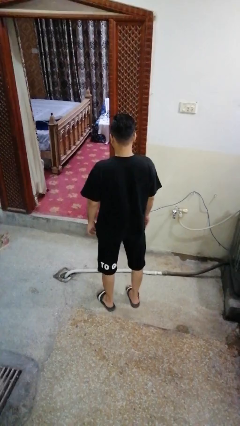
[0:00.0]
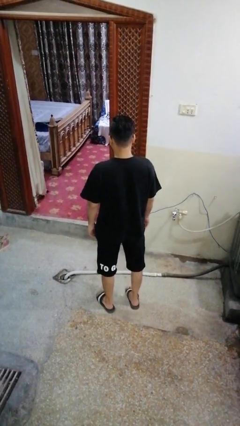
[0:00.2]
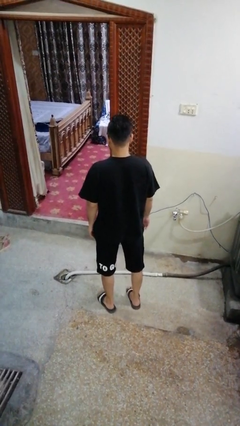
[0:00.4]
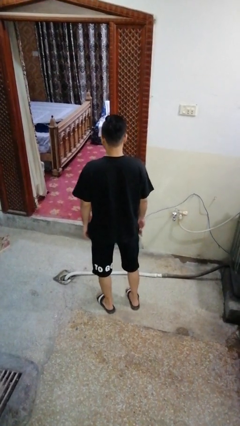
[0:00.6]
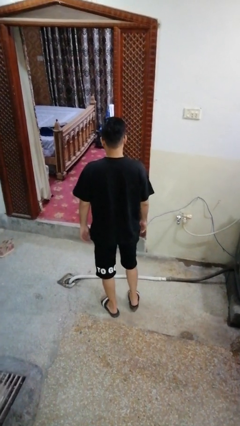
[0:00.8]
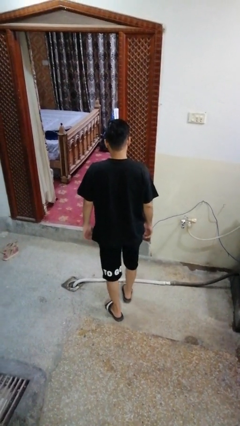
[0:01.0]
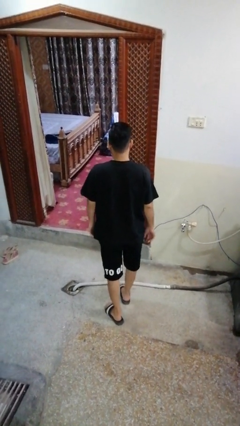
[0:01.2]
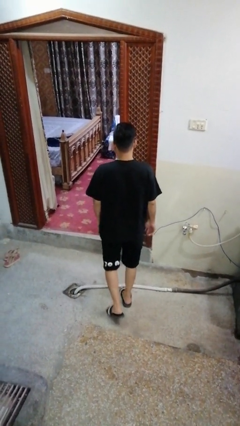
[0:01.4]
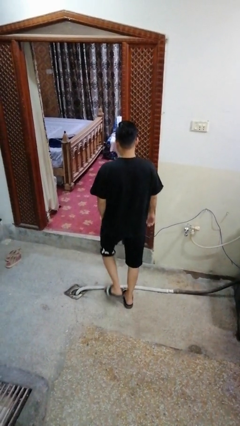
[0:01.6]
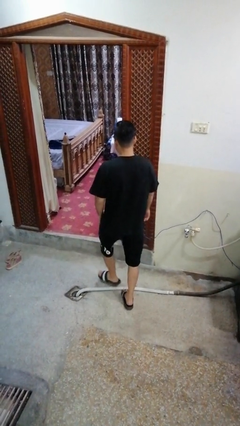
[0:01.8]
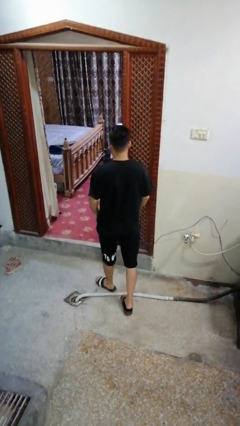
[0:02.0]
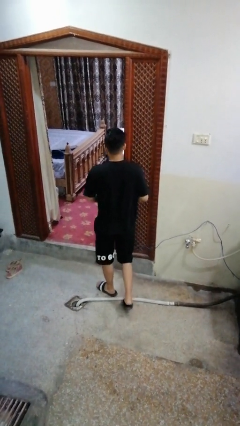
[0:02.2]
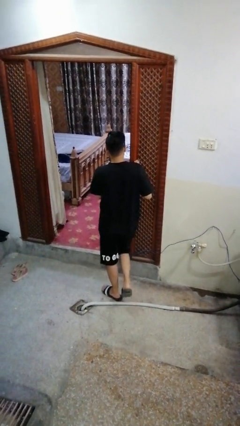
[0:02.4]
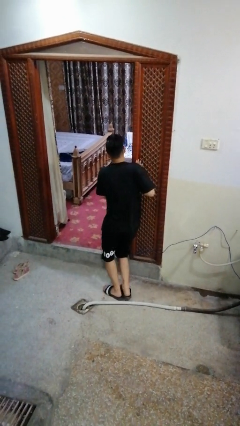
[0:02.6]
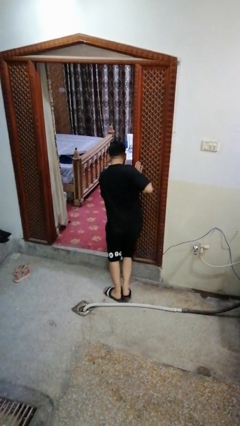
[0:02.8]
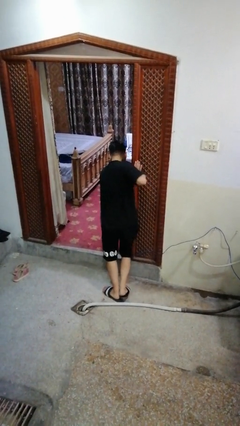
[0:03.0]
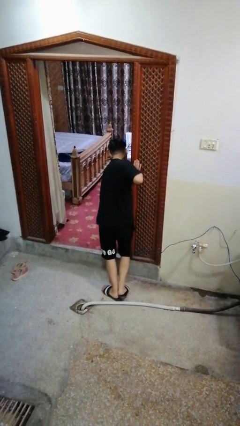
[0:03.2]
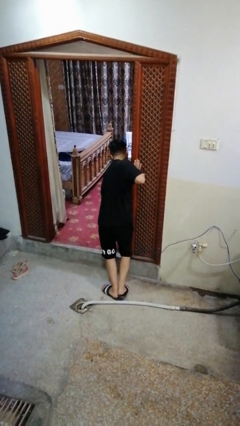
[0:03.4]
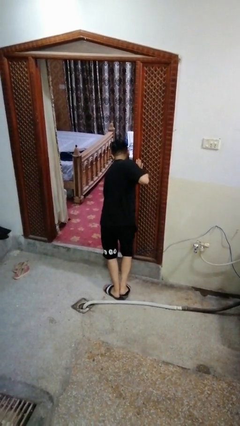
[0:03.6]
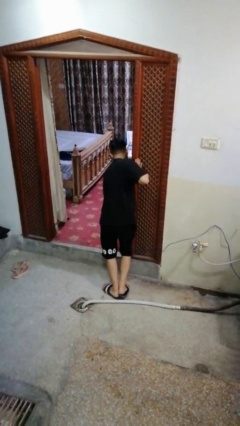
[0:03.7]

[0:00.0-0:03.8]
person bumps into wall

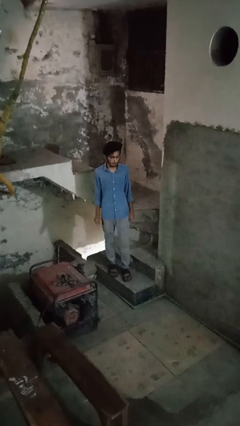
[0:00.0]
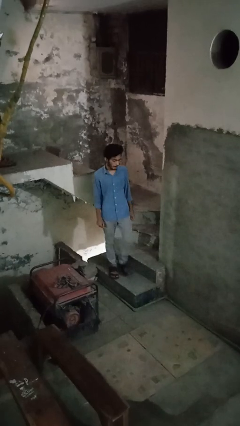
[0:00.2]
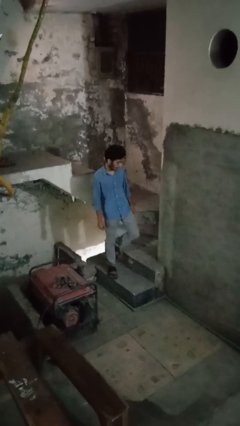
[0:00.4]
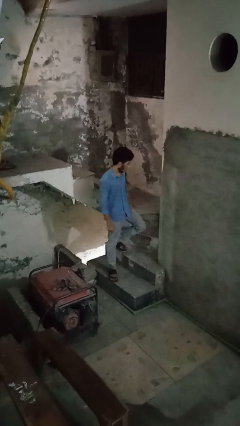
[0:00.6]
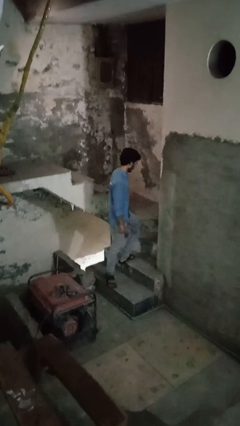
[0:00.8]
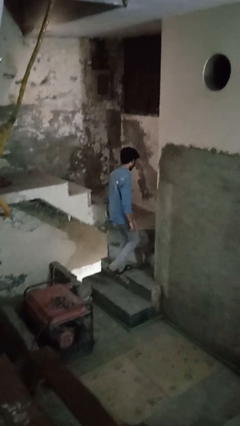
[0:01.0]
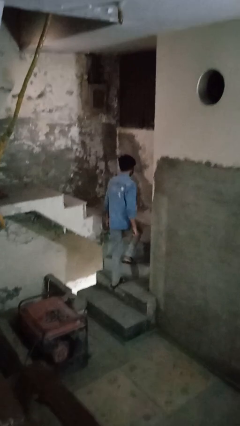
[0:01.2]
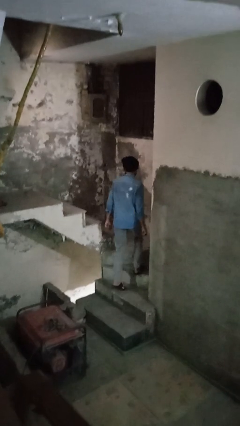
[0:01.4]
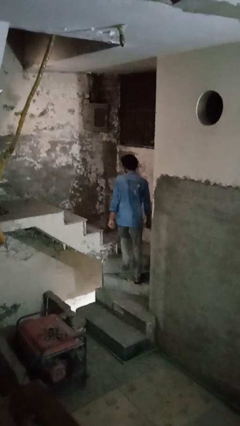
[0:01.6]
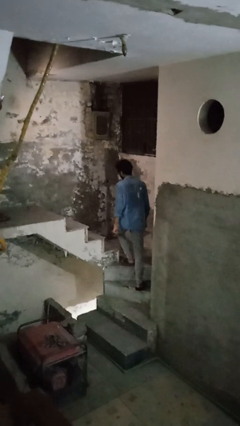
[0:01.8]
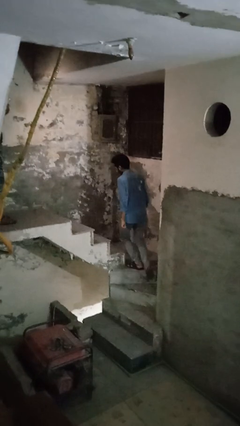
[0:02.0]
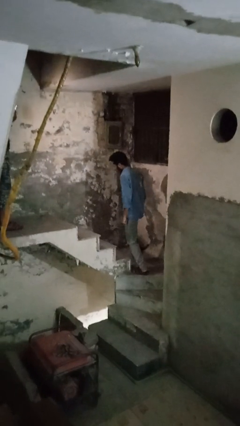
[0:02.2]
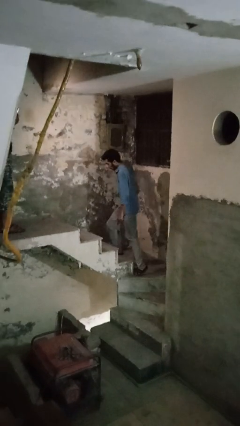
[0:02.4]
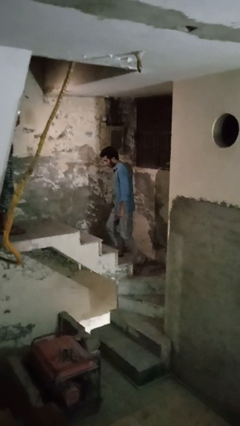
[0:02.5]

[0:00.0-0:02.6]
person climbs up stairs

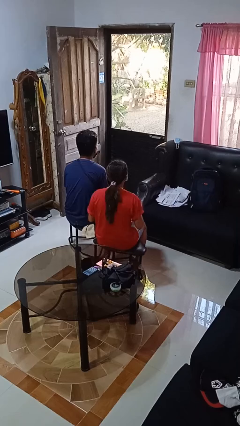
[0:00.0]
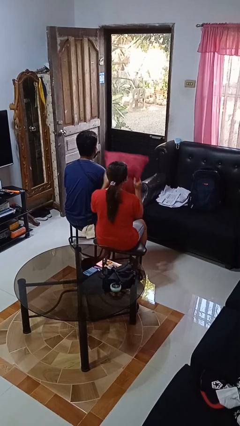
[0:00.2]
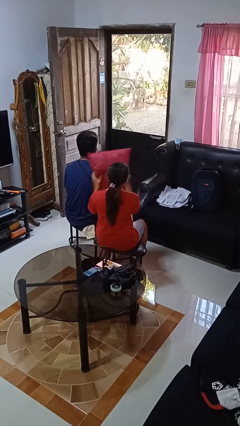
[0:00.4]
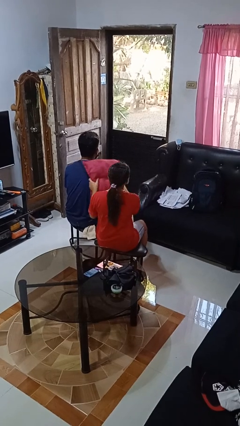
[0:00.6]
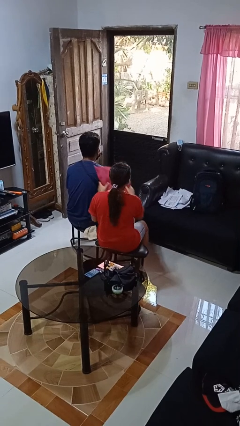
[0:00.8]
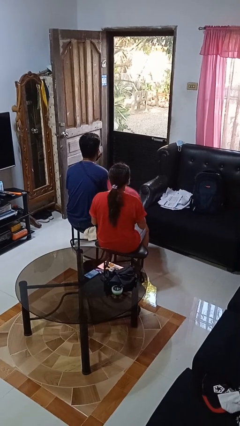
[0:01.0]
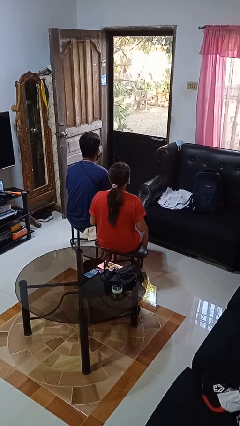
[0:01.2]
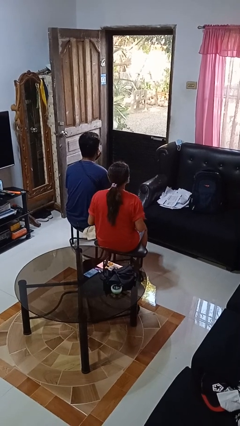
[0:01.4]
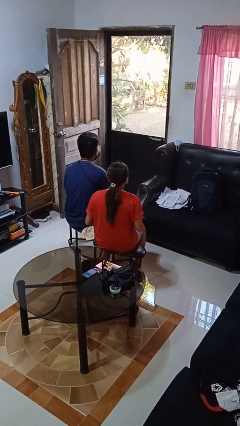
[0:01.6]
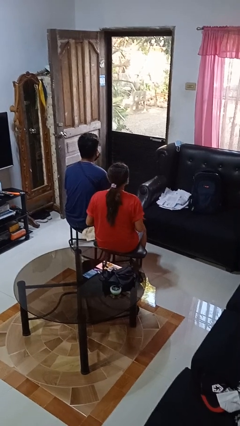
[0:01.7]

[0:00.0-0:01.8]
person hits person with pillow

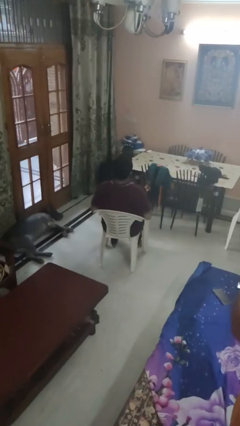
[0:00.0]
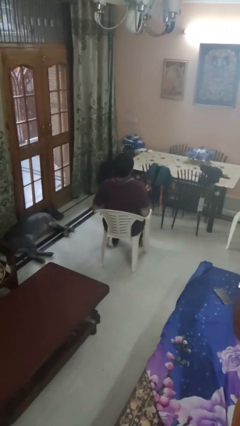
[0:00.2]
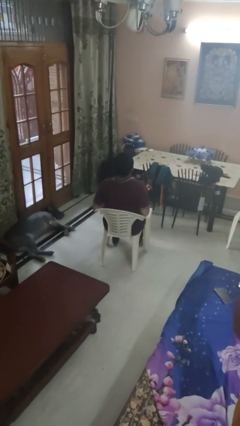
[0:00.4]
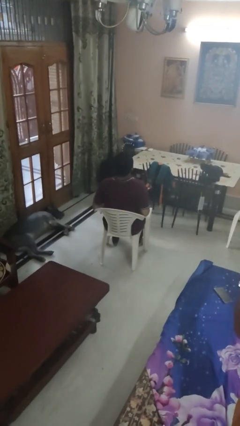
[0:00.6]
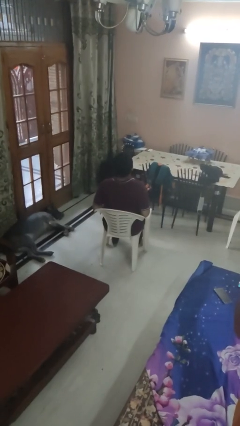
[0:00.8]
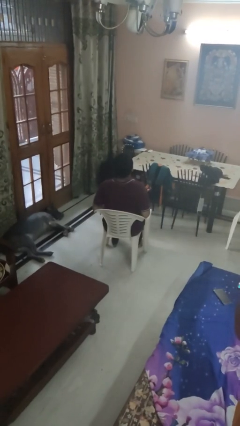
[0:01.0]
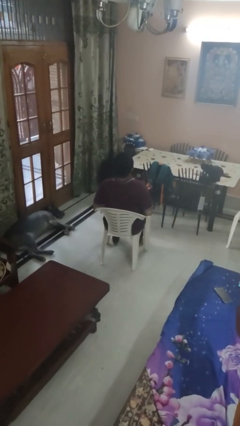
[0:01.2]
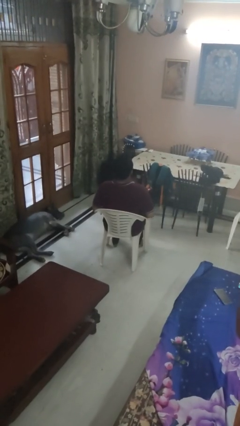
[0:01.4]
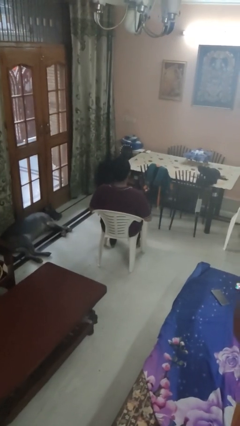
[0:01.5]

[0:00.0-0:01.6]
person shrugs

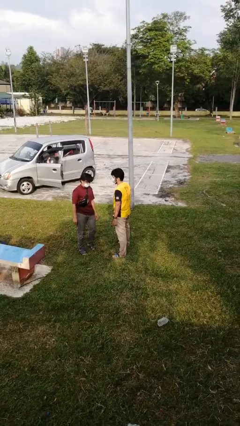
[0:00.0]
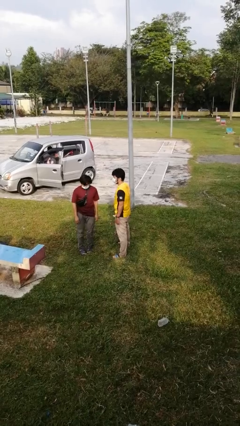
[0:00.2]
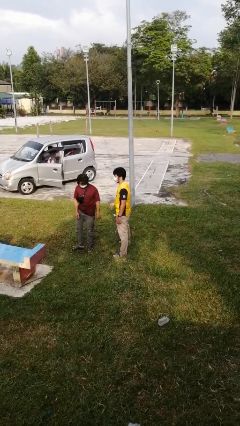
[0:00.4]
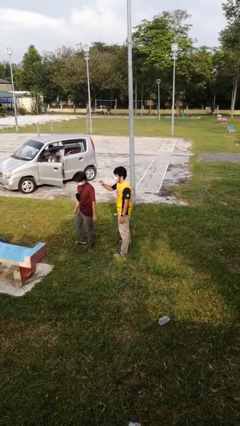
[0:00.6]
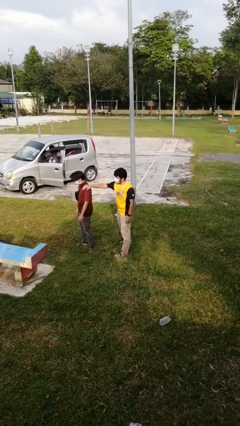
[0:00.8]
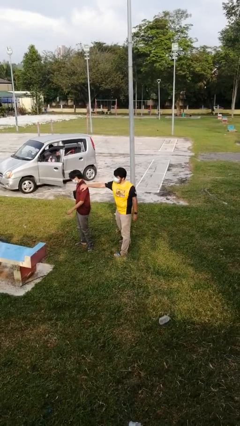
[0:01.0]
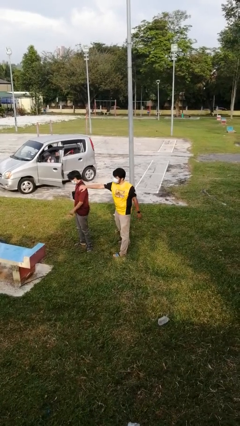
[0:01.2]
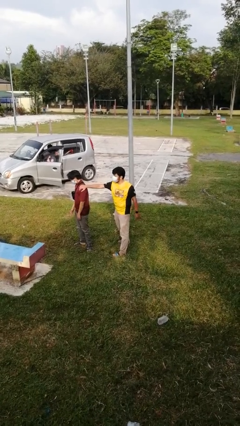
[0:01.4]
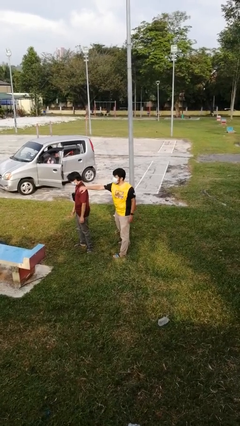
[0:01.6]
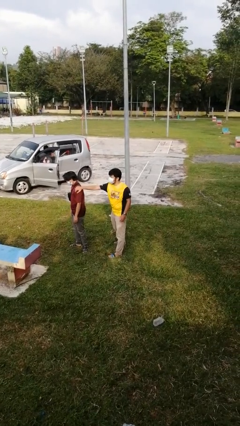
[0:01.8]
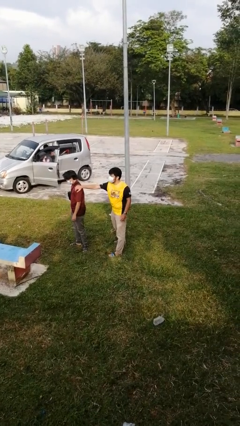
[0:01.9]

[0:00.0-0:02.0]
person grabs person by shoulder

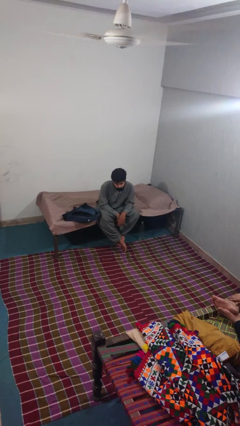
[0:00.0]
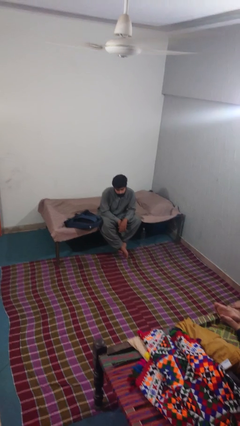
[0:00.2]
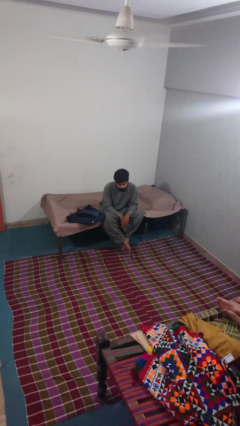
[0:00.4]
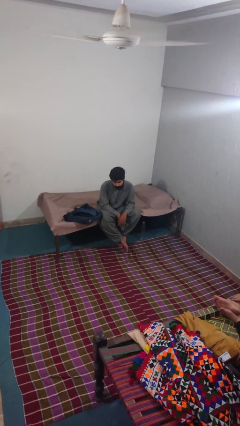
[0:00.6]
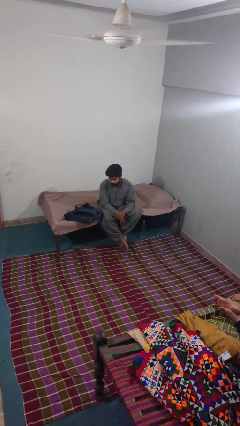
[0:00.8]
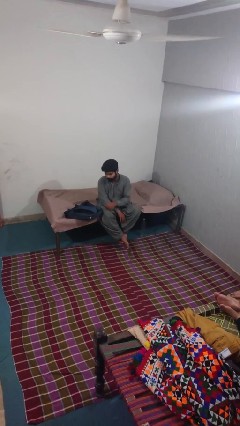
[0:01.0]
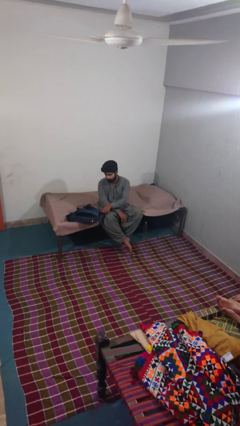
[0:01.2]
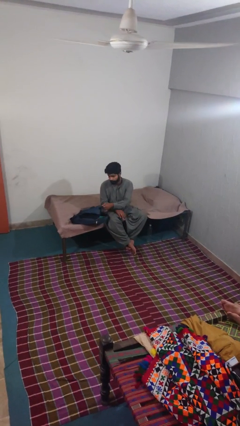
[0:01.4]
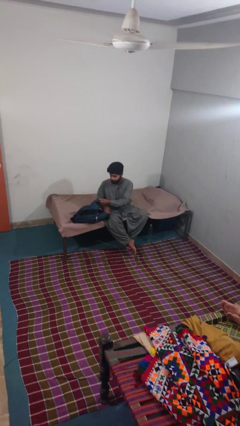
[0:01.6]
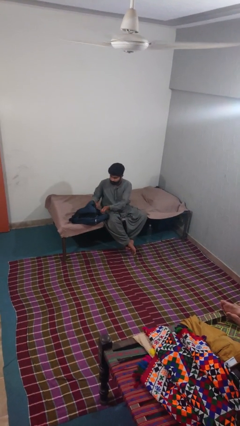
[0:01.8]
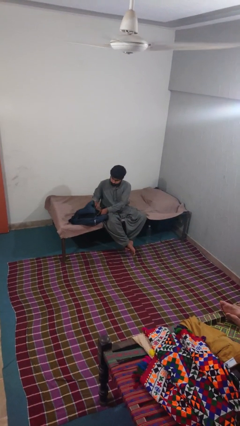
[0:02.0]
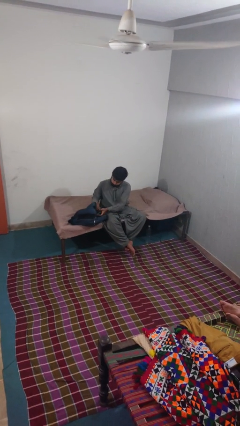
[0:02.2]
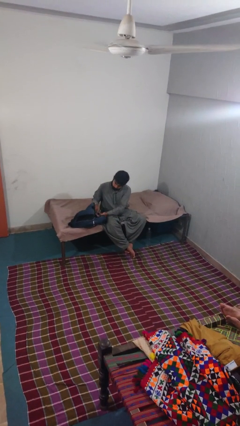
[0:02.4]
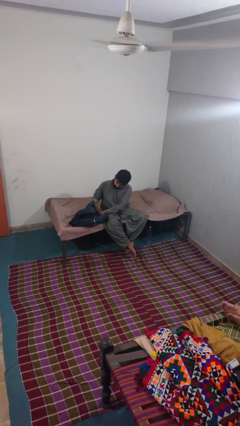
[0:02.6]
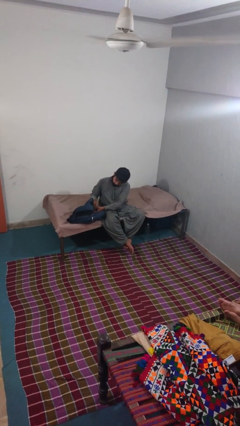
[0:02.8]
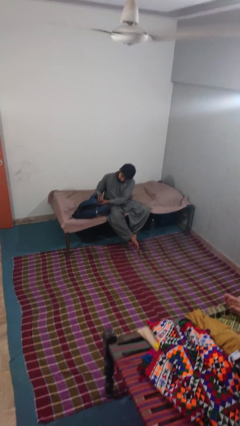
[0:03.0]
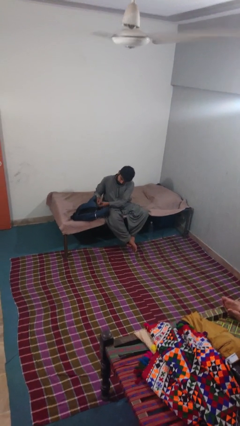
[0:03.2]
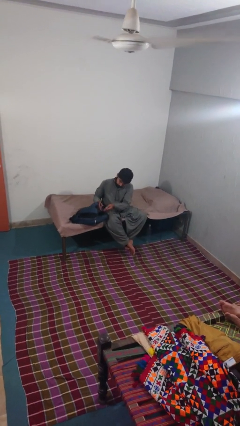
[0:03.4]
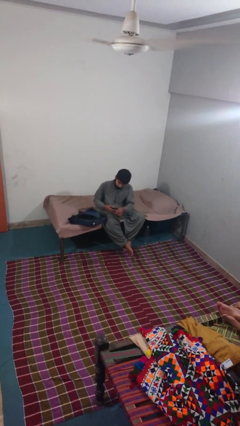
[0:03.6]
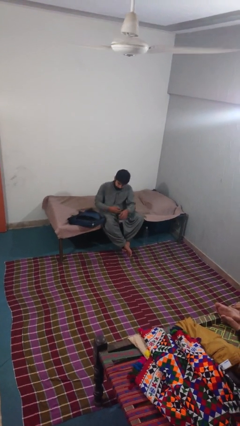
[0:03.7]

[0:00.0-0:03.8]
person searches in bag

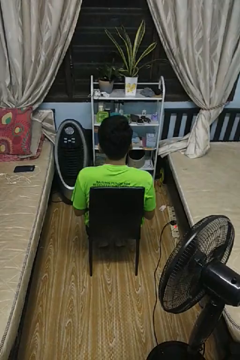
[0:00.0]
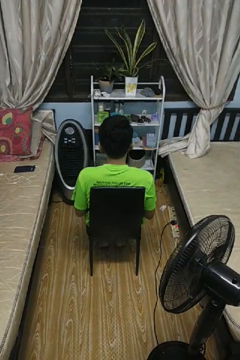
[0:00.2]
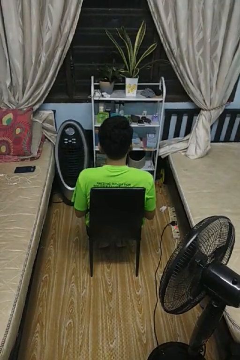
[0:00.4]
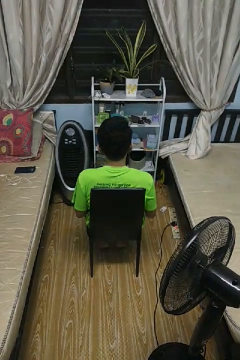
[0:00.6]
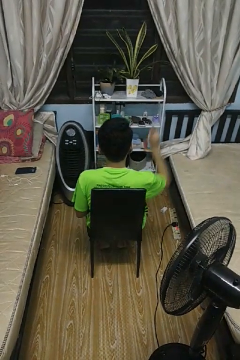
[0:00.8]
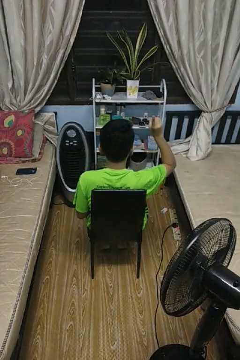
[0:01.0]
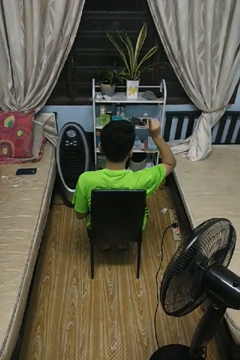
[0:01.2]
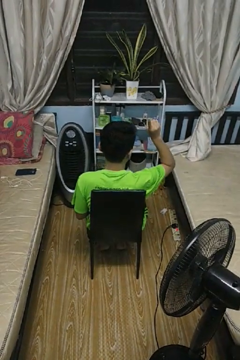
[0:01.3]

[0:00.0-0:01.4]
person gestures number one

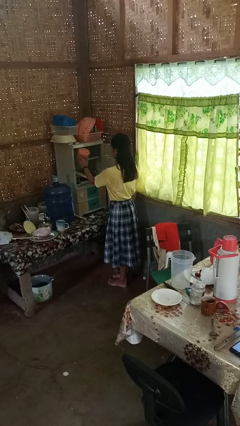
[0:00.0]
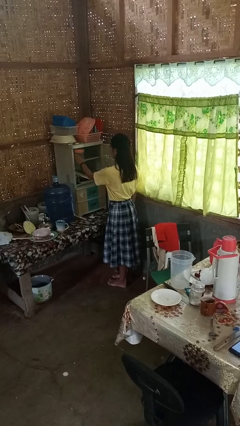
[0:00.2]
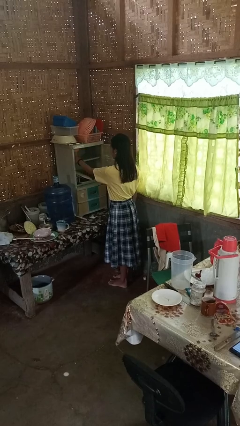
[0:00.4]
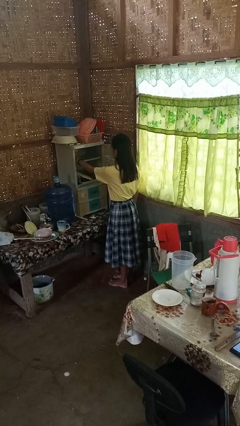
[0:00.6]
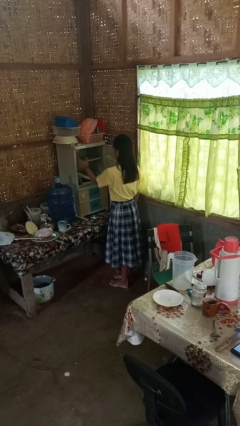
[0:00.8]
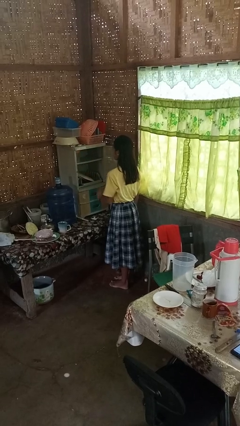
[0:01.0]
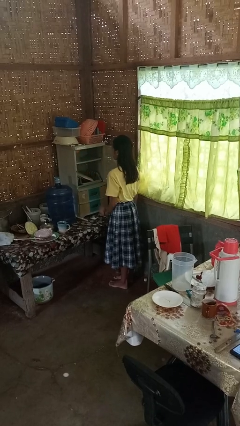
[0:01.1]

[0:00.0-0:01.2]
person puts down object into cabinet
